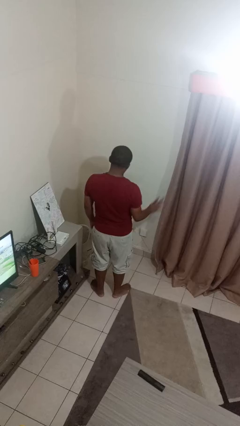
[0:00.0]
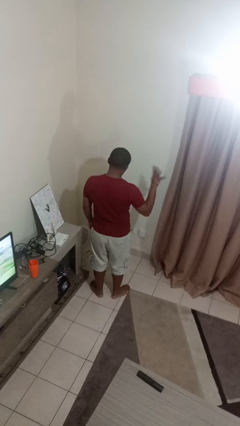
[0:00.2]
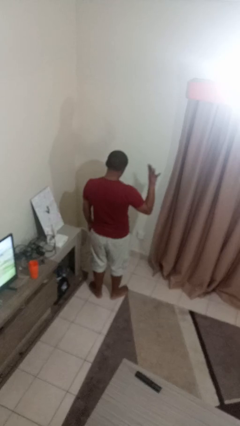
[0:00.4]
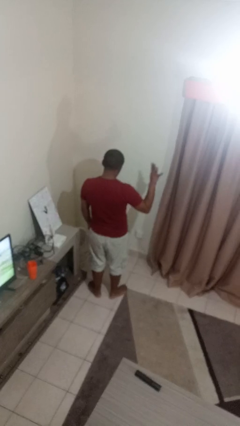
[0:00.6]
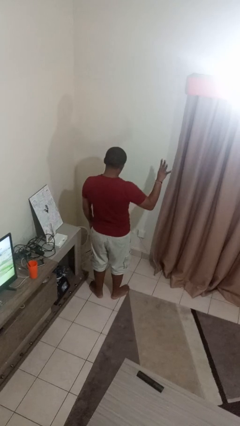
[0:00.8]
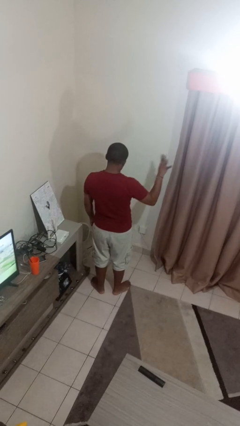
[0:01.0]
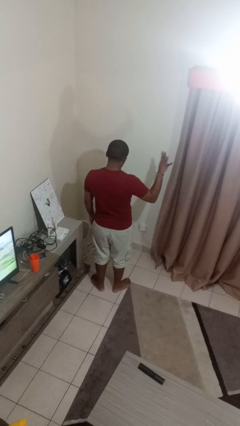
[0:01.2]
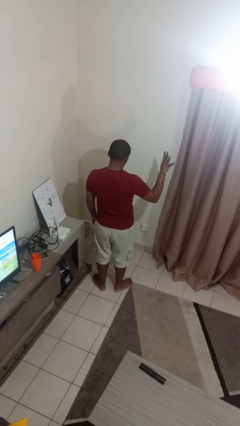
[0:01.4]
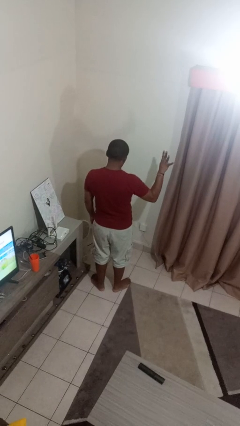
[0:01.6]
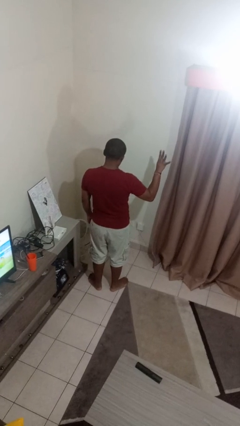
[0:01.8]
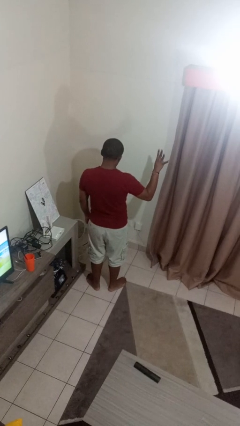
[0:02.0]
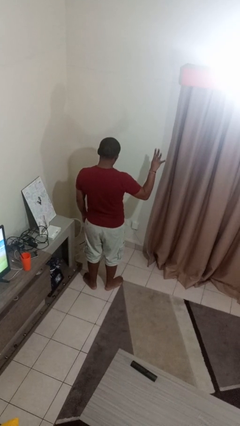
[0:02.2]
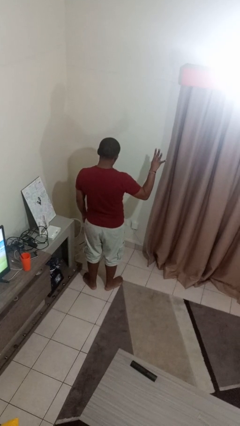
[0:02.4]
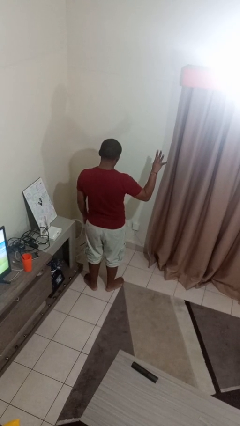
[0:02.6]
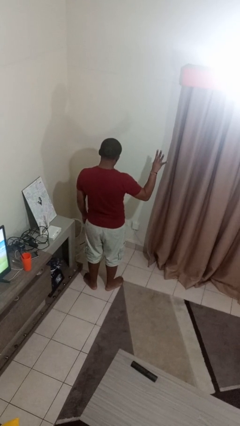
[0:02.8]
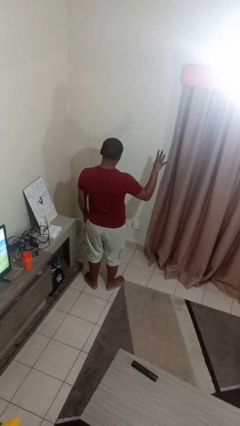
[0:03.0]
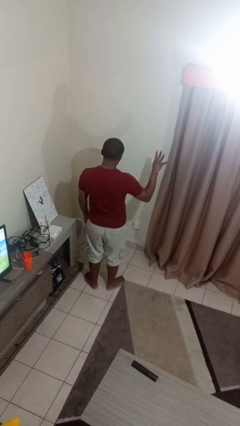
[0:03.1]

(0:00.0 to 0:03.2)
person gestures number four

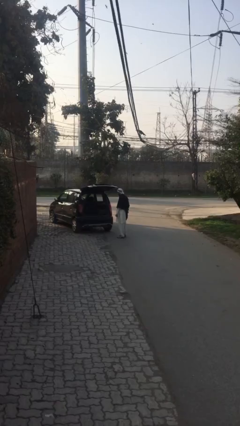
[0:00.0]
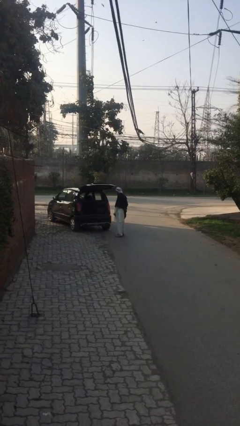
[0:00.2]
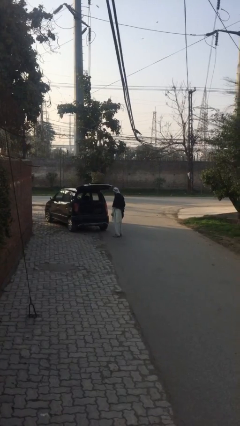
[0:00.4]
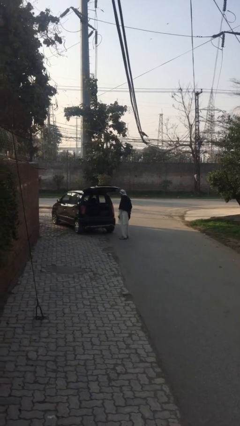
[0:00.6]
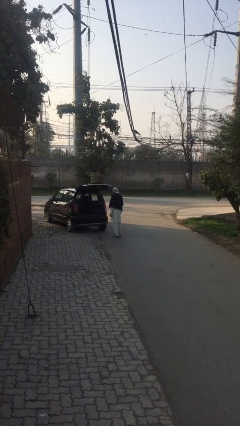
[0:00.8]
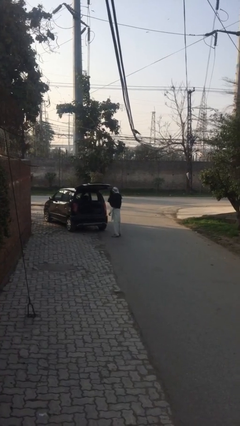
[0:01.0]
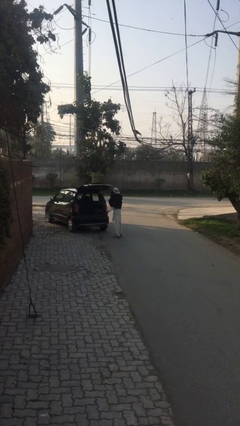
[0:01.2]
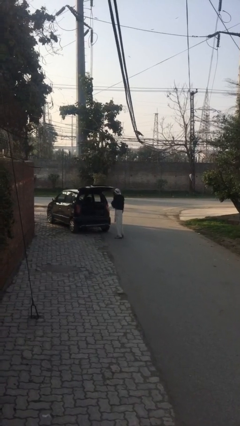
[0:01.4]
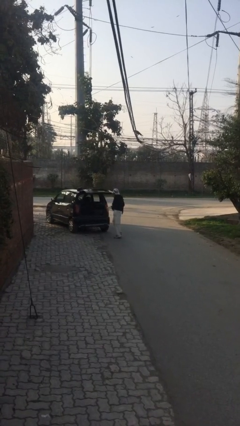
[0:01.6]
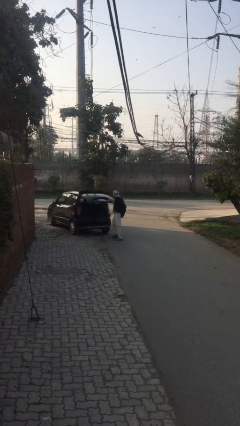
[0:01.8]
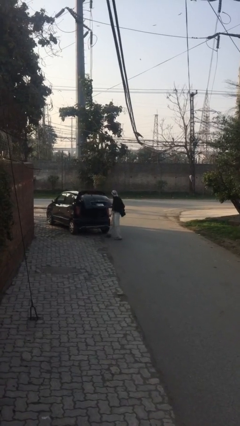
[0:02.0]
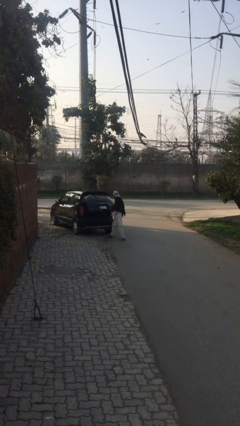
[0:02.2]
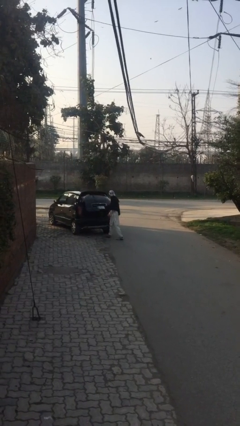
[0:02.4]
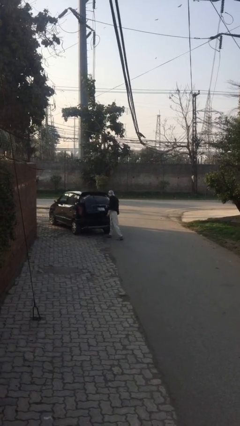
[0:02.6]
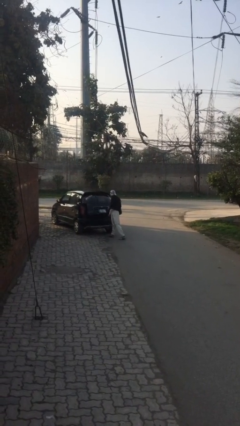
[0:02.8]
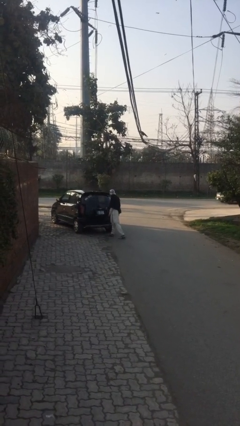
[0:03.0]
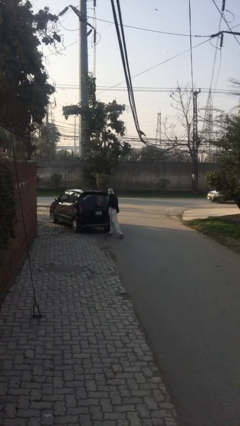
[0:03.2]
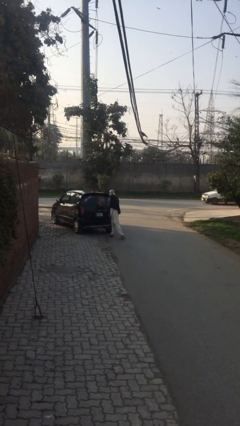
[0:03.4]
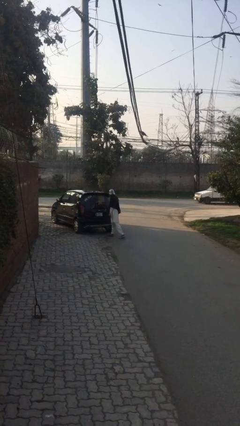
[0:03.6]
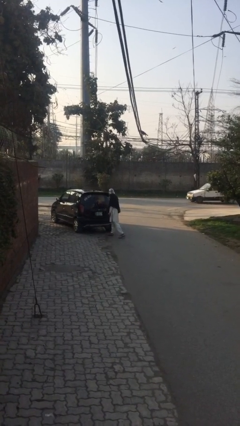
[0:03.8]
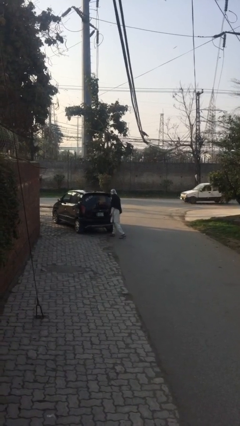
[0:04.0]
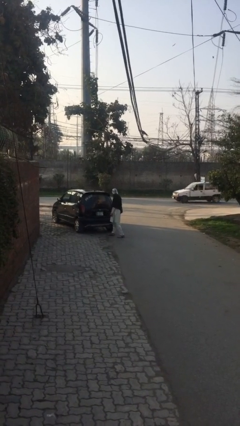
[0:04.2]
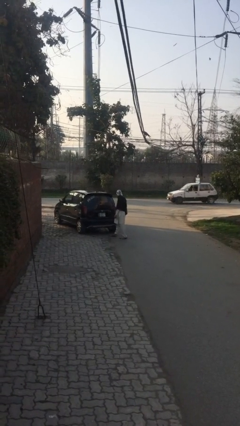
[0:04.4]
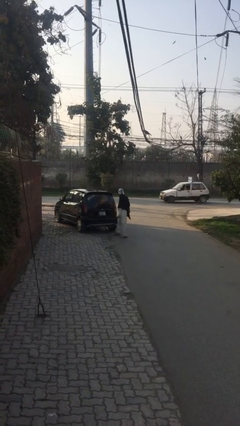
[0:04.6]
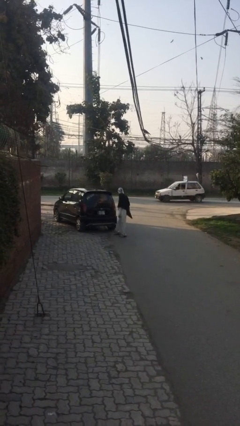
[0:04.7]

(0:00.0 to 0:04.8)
person closes car trunk

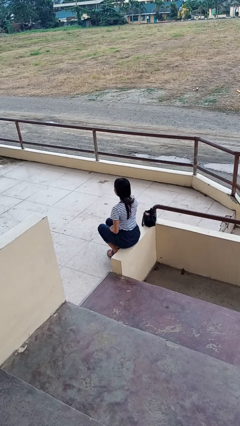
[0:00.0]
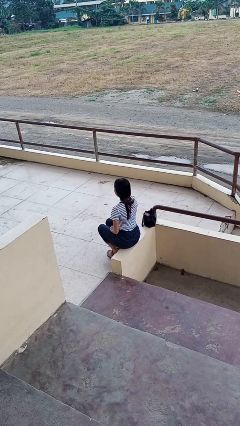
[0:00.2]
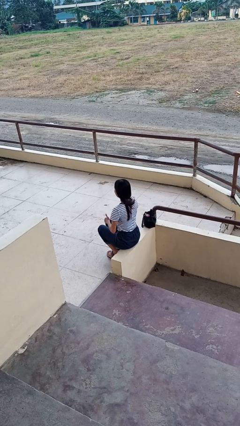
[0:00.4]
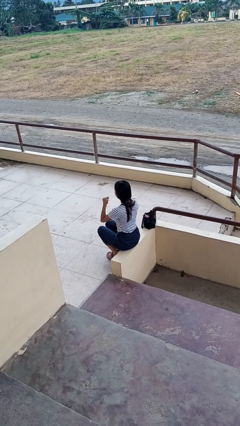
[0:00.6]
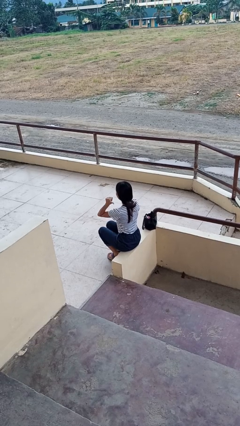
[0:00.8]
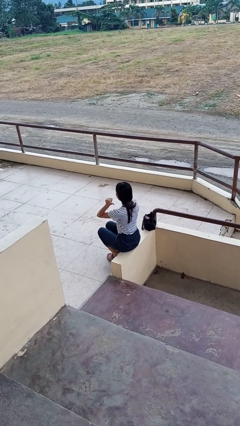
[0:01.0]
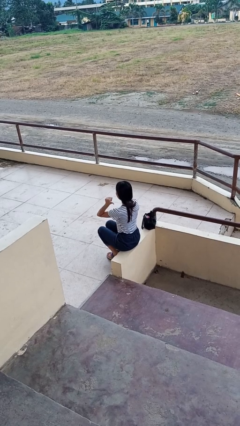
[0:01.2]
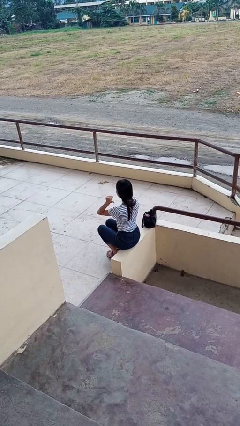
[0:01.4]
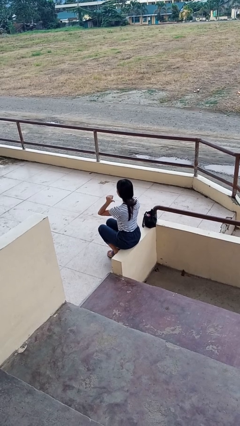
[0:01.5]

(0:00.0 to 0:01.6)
person gestures behind me

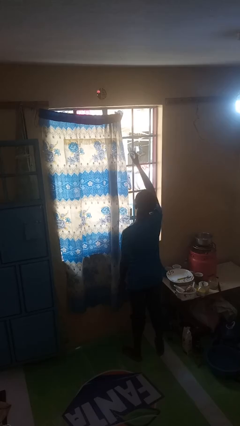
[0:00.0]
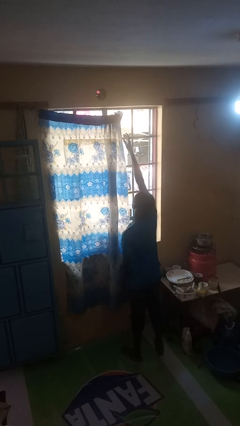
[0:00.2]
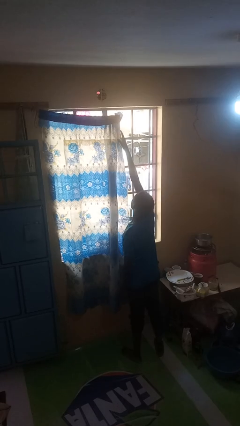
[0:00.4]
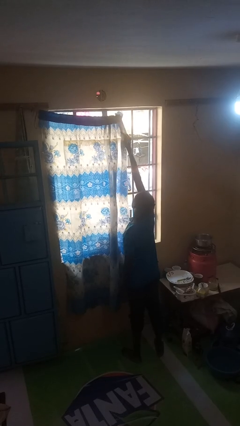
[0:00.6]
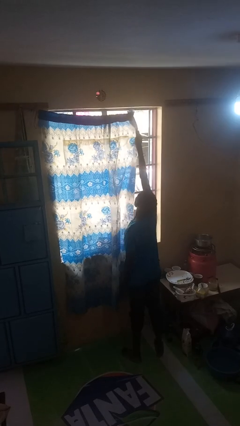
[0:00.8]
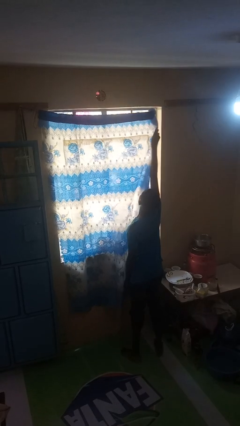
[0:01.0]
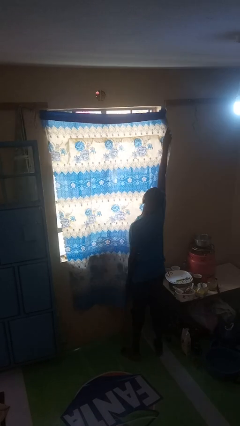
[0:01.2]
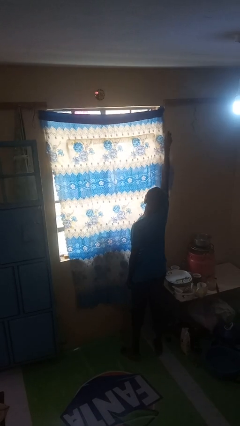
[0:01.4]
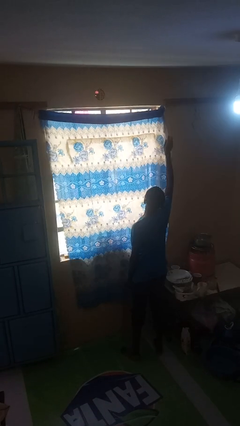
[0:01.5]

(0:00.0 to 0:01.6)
person closes curtains

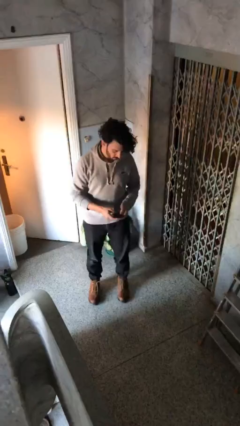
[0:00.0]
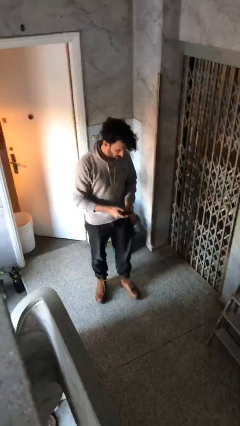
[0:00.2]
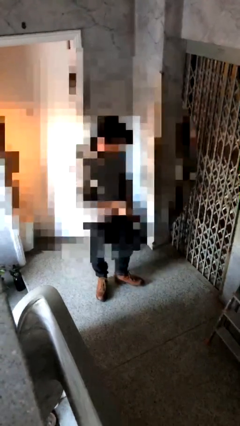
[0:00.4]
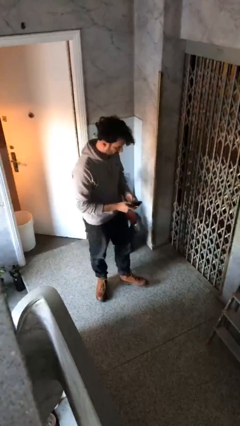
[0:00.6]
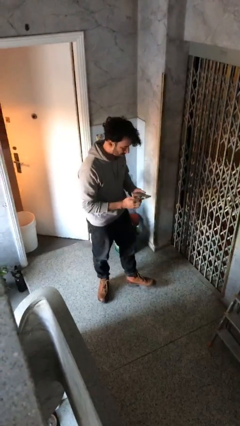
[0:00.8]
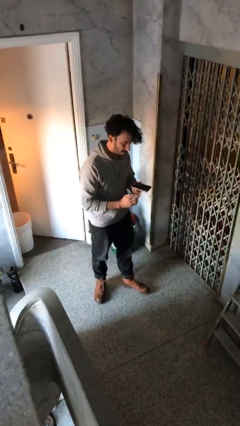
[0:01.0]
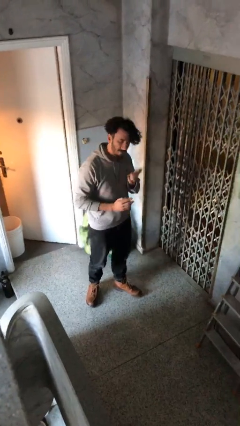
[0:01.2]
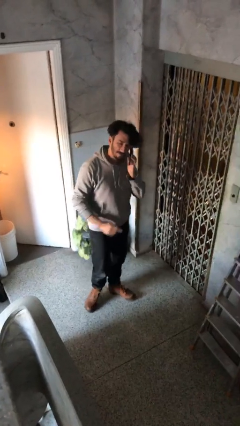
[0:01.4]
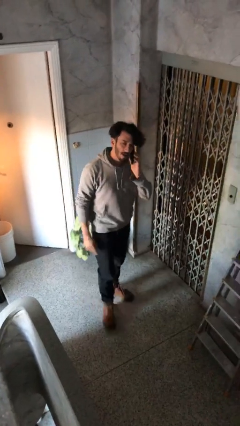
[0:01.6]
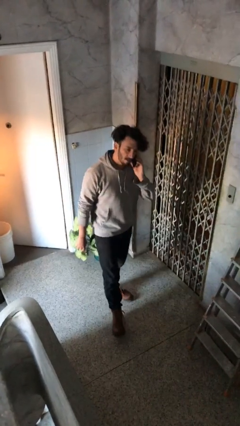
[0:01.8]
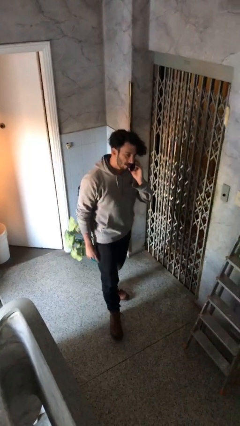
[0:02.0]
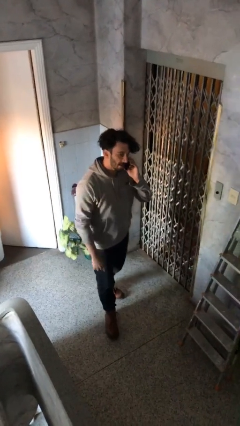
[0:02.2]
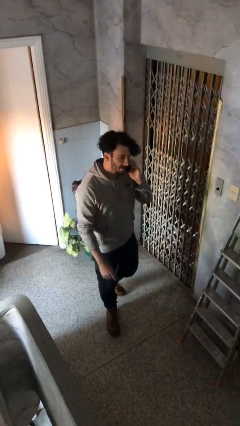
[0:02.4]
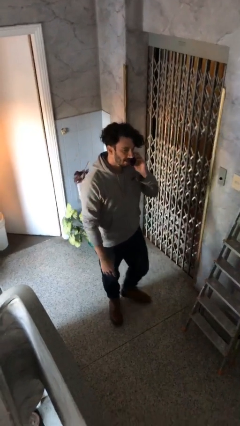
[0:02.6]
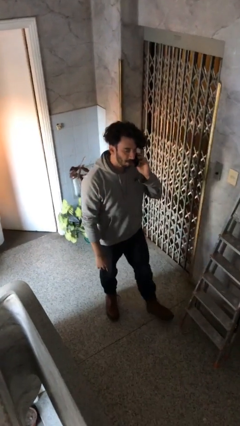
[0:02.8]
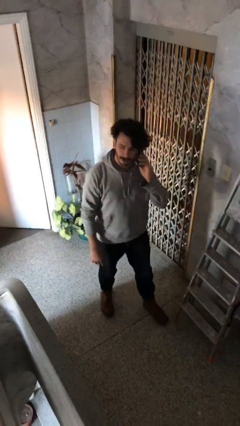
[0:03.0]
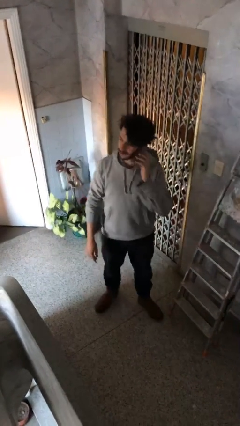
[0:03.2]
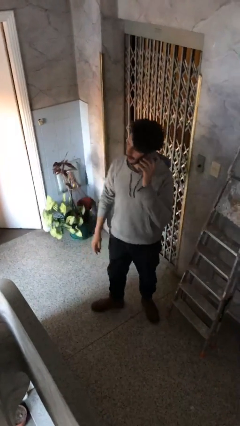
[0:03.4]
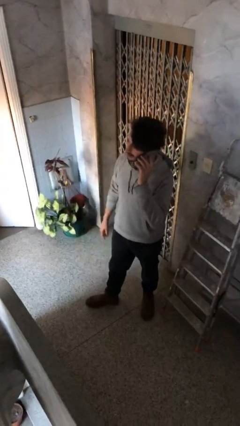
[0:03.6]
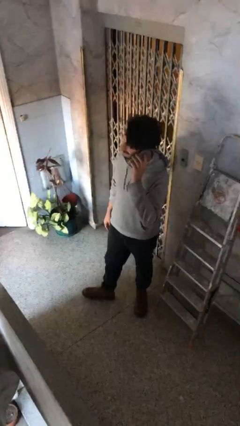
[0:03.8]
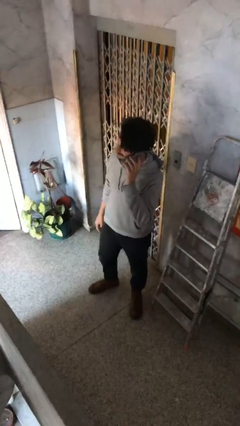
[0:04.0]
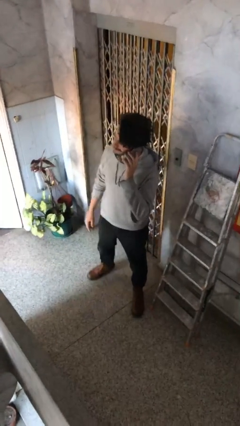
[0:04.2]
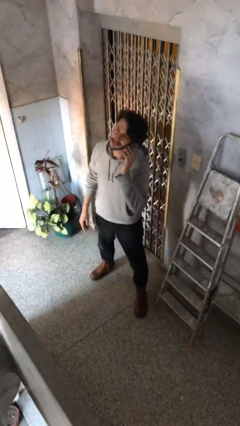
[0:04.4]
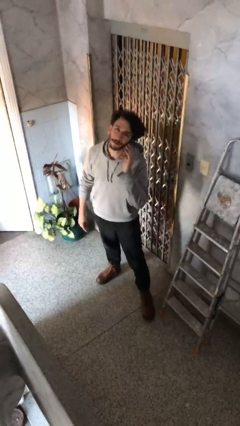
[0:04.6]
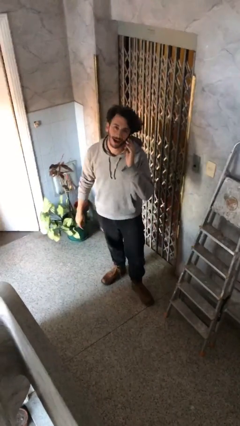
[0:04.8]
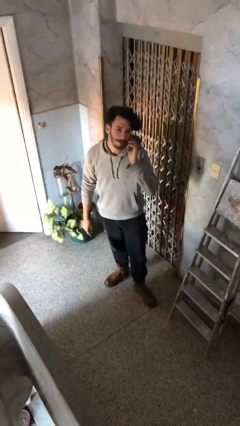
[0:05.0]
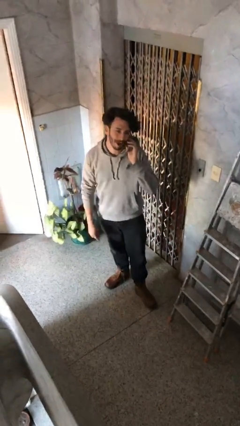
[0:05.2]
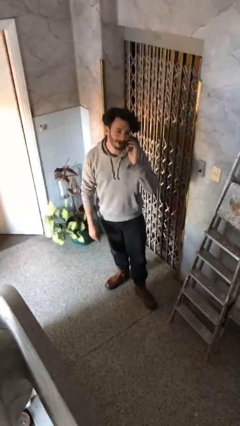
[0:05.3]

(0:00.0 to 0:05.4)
person talks on phone

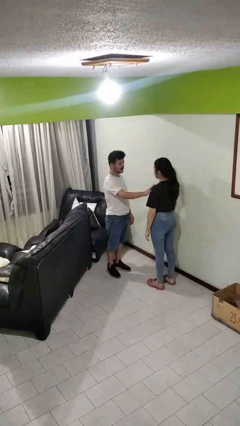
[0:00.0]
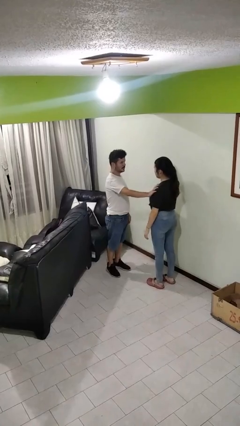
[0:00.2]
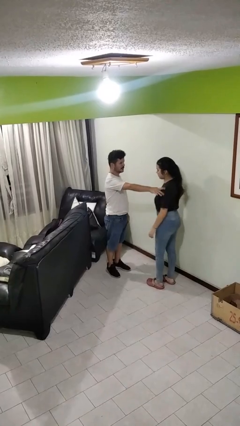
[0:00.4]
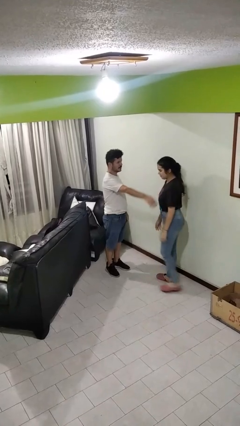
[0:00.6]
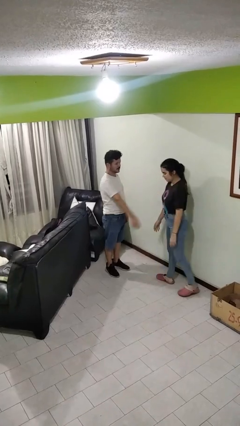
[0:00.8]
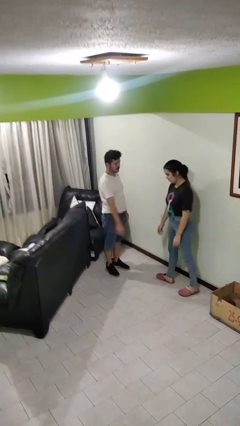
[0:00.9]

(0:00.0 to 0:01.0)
person shoves person

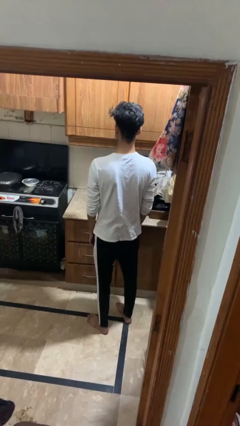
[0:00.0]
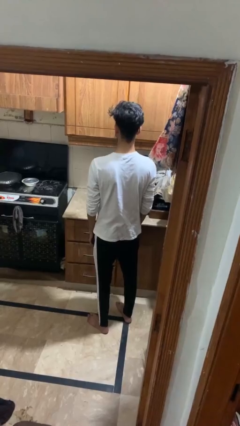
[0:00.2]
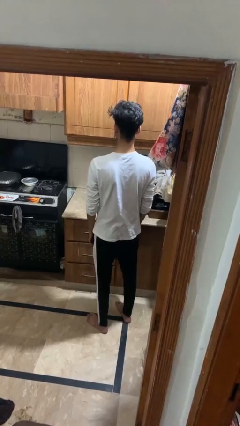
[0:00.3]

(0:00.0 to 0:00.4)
person puts object in cabinet
